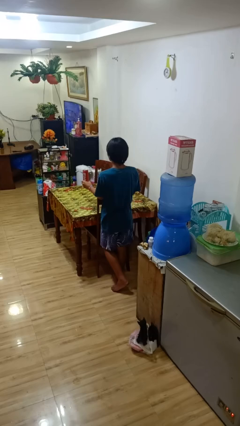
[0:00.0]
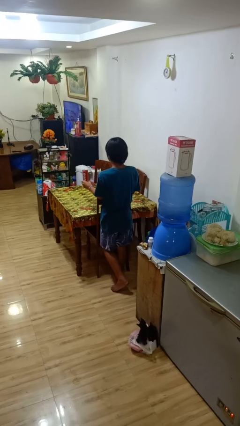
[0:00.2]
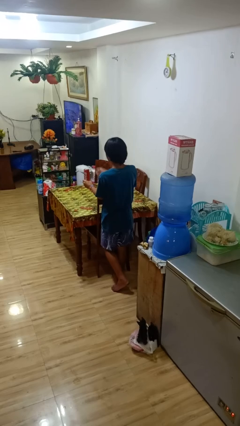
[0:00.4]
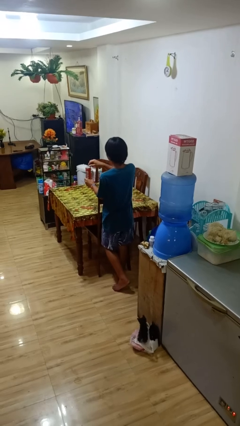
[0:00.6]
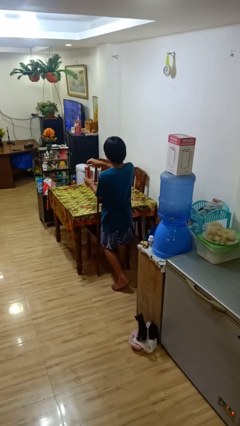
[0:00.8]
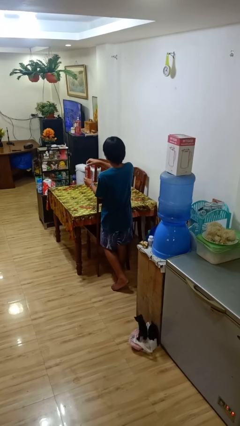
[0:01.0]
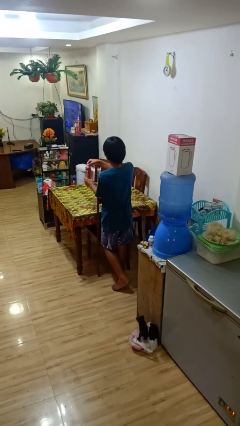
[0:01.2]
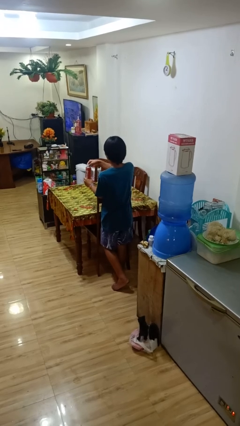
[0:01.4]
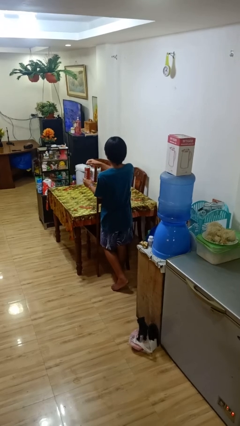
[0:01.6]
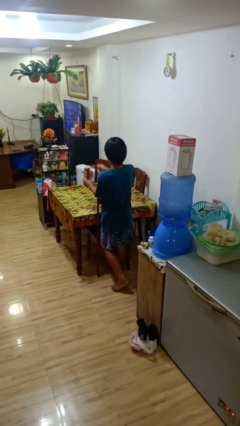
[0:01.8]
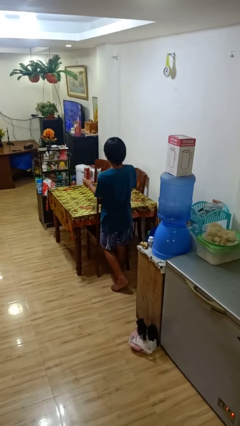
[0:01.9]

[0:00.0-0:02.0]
person opens beverage can

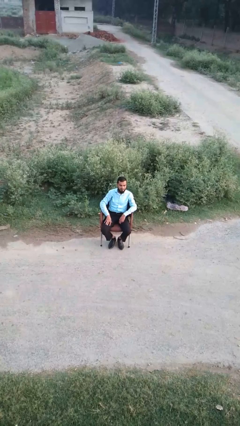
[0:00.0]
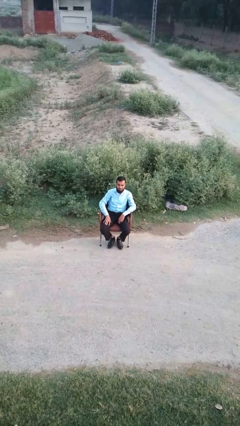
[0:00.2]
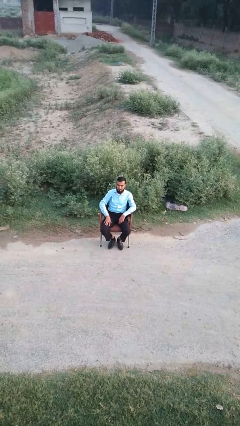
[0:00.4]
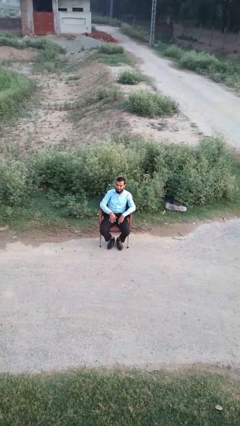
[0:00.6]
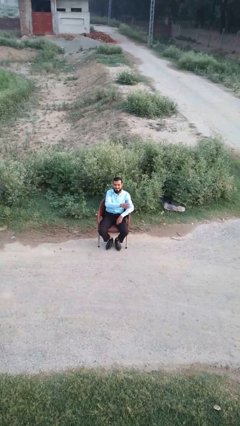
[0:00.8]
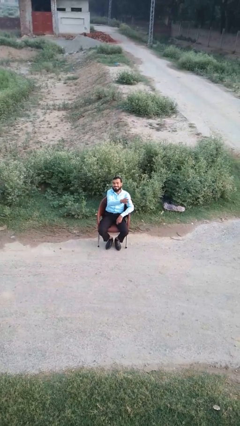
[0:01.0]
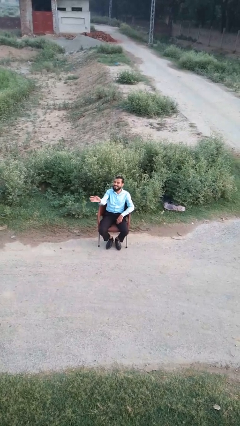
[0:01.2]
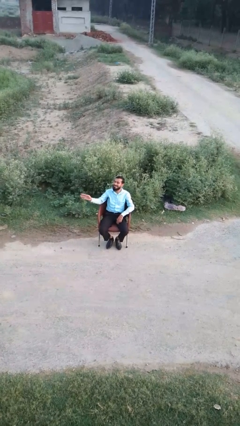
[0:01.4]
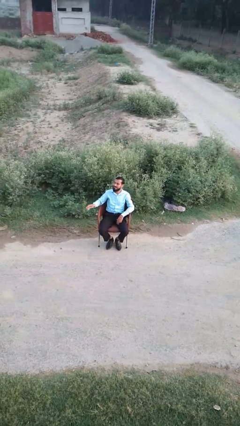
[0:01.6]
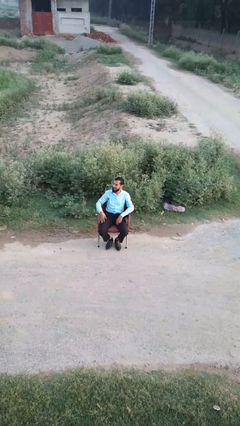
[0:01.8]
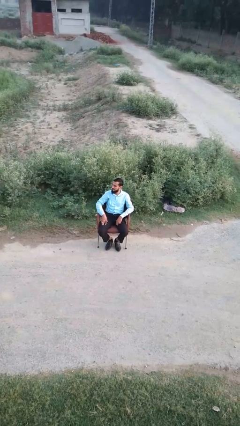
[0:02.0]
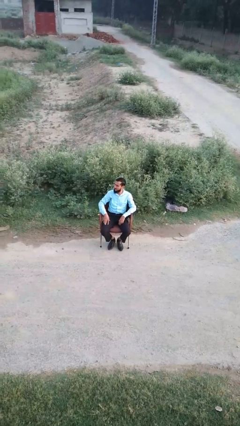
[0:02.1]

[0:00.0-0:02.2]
person gestures swipe right

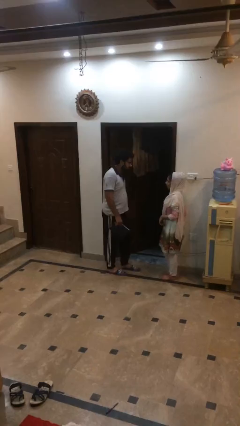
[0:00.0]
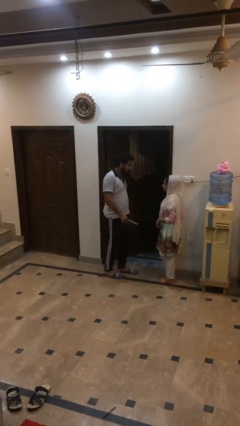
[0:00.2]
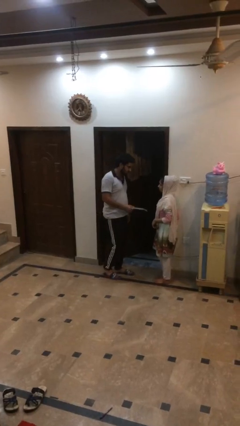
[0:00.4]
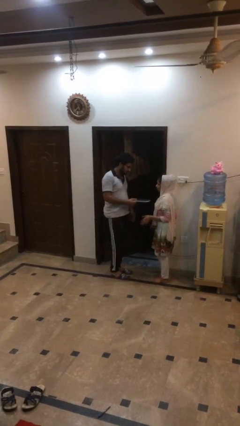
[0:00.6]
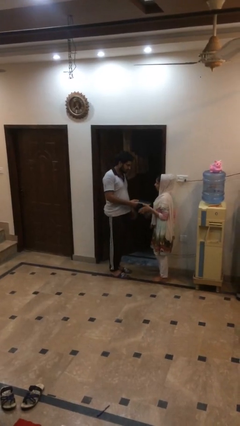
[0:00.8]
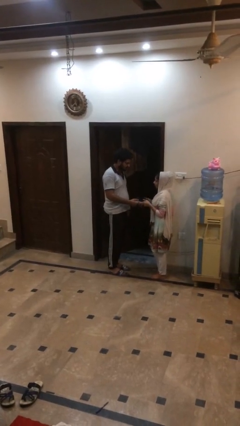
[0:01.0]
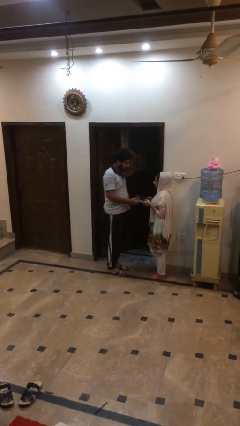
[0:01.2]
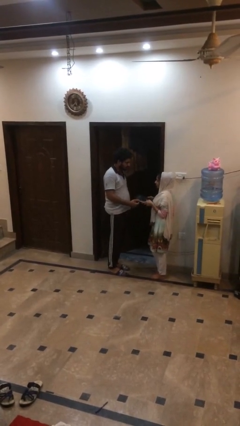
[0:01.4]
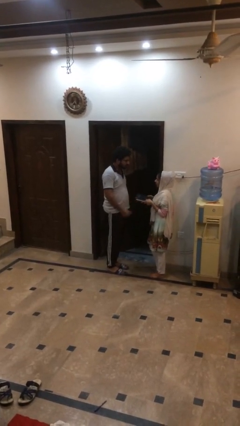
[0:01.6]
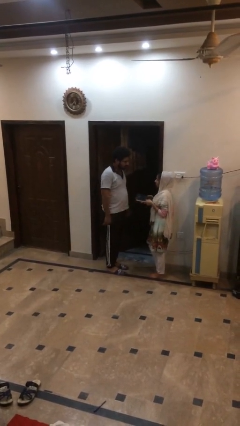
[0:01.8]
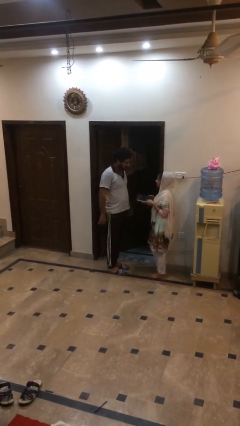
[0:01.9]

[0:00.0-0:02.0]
person transfers object to person

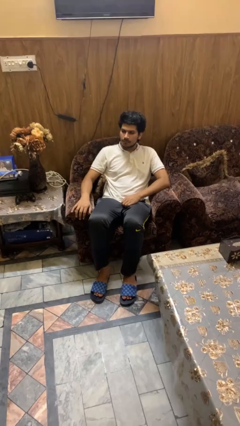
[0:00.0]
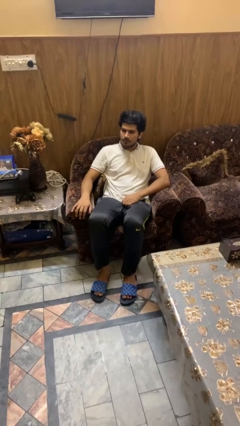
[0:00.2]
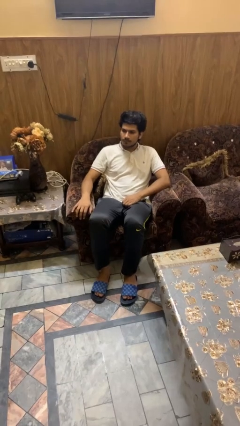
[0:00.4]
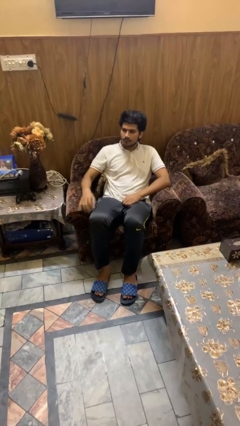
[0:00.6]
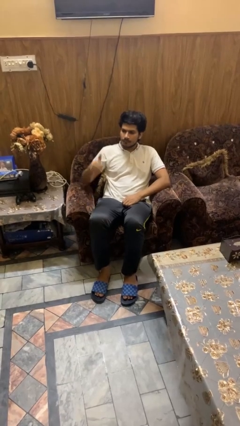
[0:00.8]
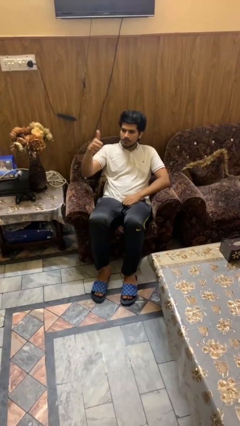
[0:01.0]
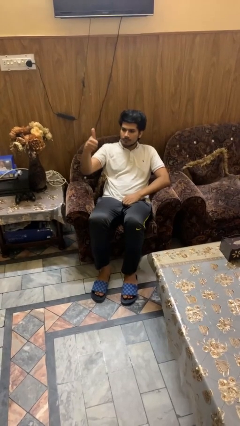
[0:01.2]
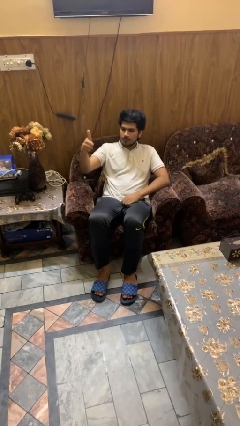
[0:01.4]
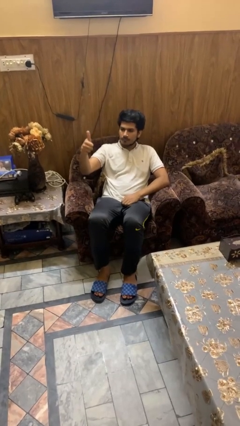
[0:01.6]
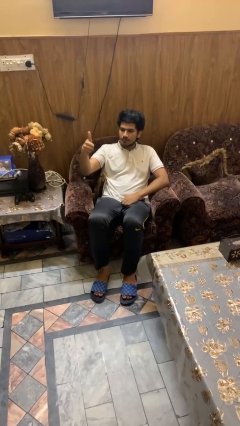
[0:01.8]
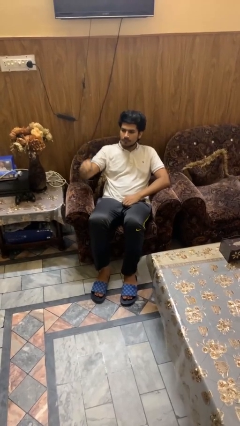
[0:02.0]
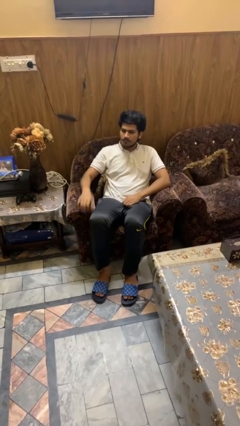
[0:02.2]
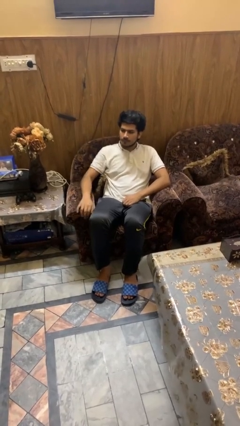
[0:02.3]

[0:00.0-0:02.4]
person gestures thumbs up

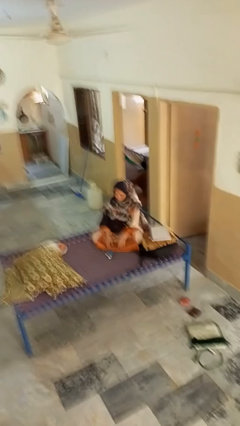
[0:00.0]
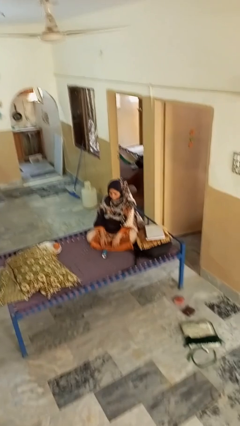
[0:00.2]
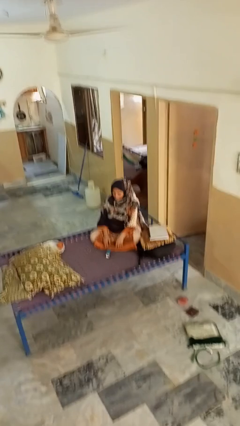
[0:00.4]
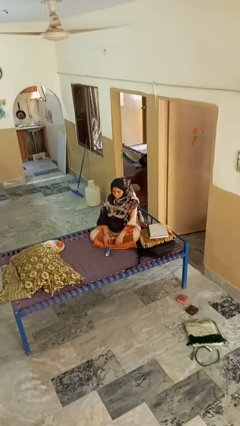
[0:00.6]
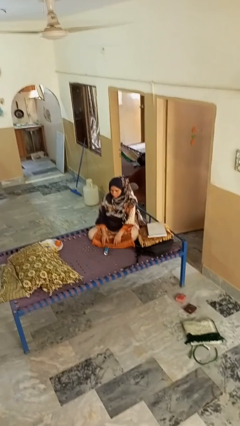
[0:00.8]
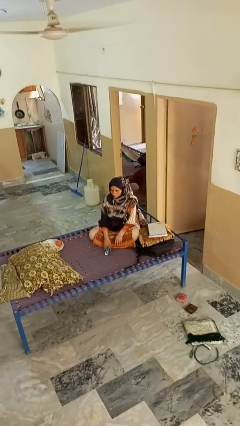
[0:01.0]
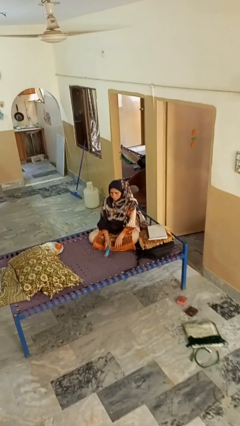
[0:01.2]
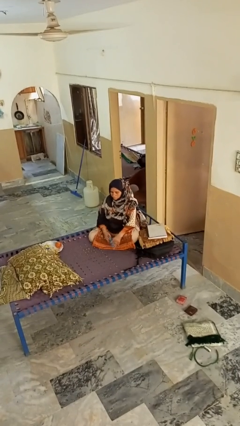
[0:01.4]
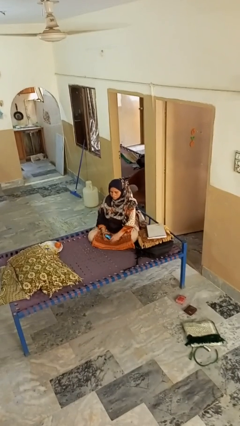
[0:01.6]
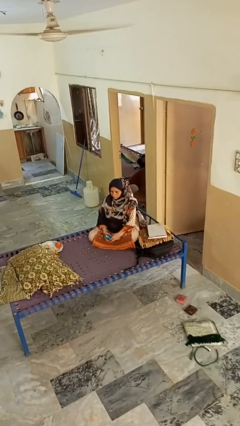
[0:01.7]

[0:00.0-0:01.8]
person picks up object from floor

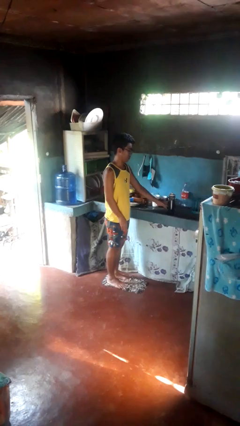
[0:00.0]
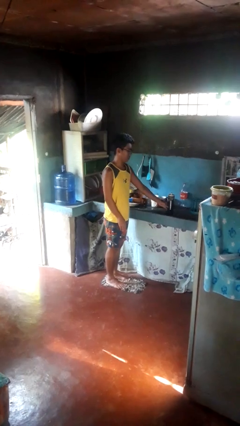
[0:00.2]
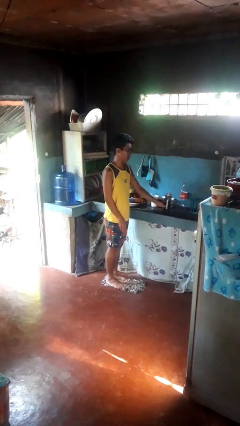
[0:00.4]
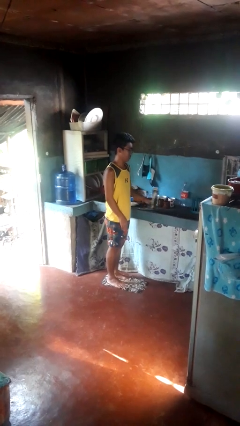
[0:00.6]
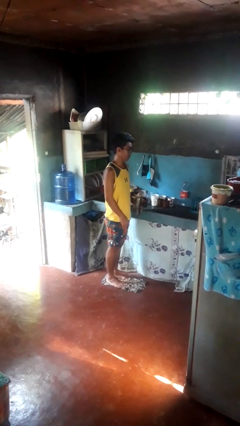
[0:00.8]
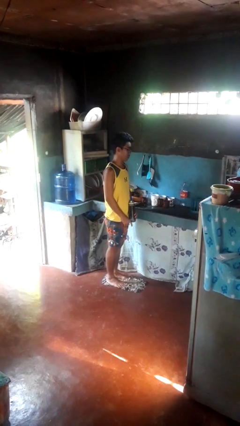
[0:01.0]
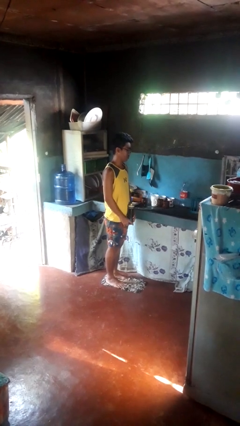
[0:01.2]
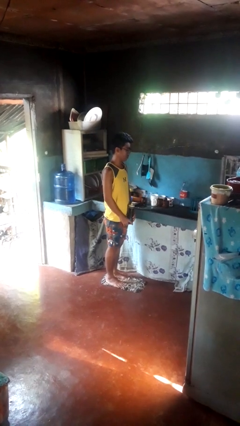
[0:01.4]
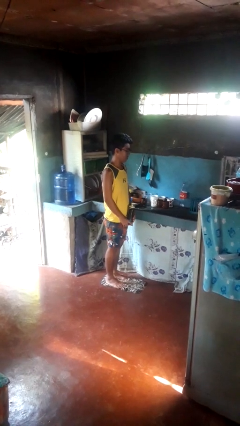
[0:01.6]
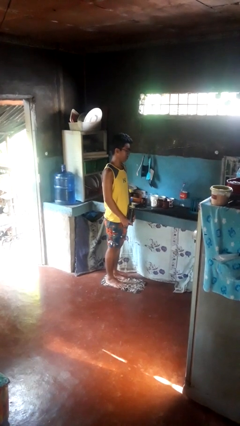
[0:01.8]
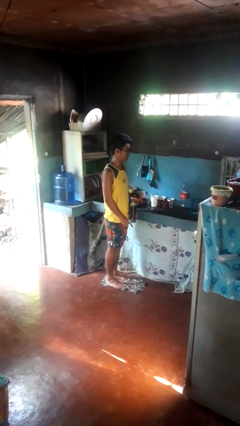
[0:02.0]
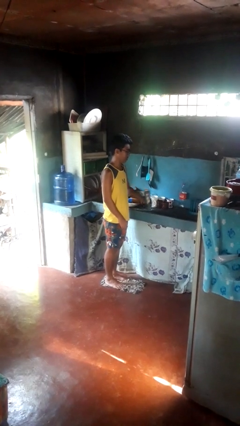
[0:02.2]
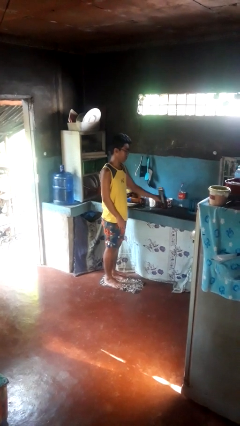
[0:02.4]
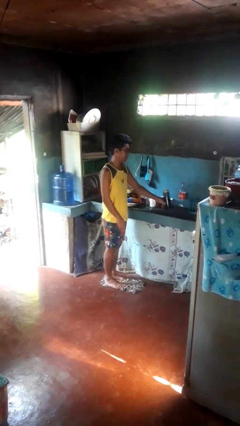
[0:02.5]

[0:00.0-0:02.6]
person picks up object from countertop

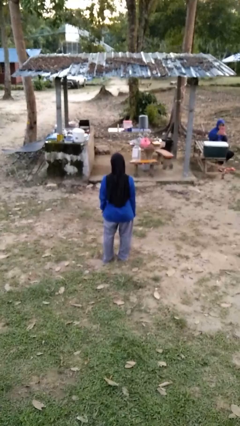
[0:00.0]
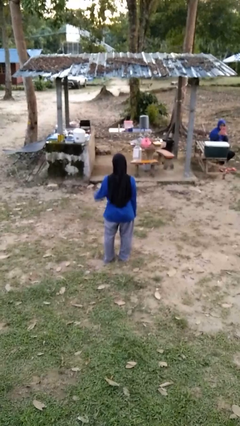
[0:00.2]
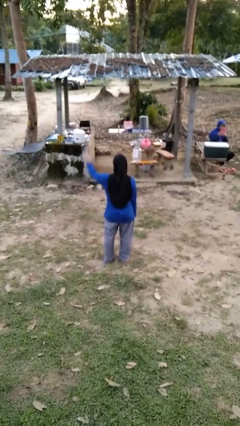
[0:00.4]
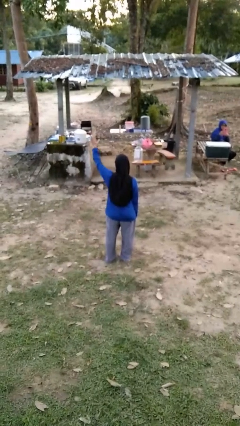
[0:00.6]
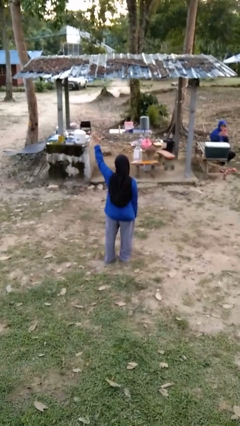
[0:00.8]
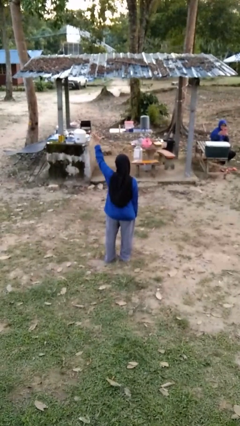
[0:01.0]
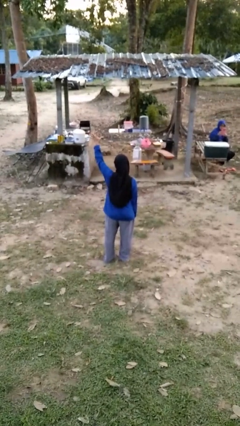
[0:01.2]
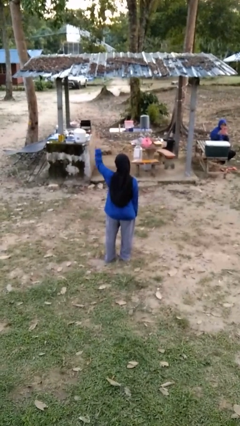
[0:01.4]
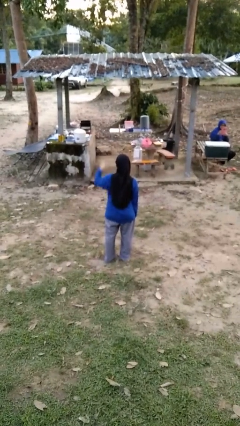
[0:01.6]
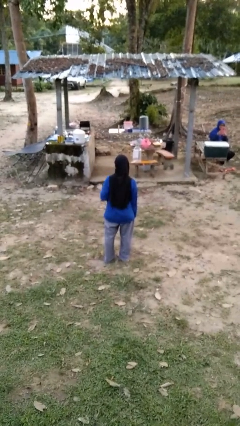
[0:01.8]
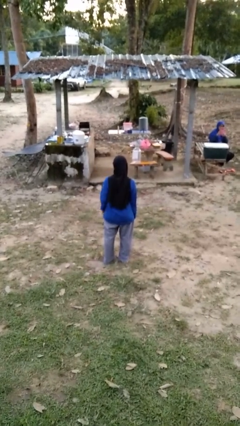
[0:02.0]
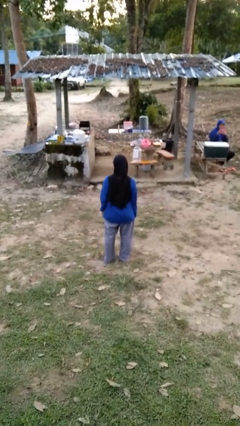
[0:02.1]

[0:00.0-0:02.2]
person gestures number five

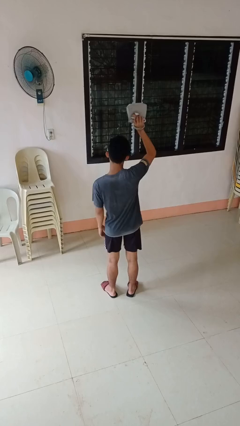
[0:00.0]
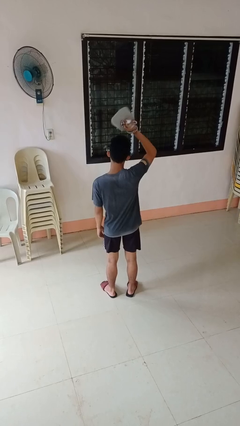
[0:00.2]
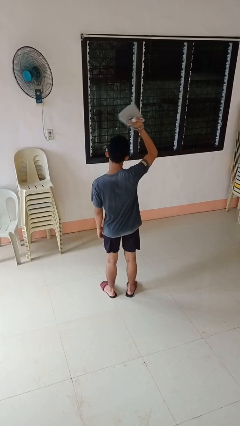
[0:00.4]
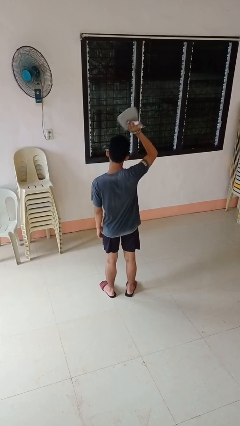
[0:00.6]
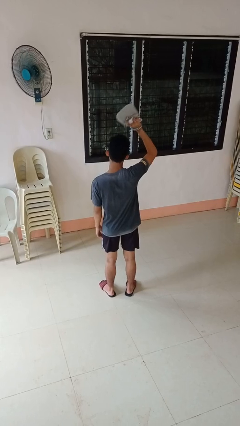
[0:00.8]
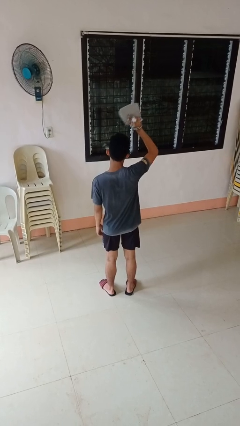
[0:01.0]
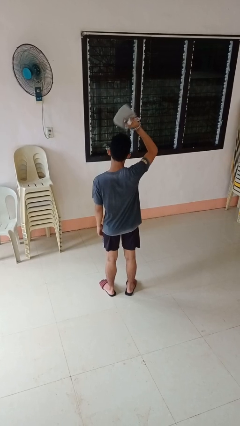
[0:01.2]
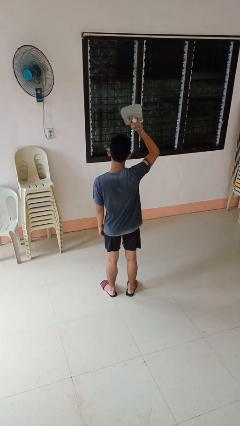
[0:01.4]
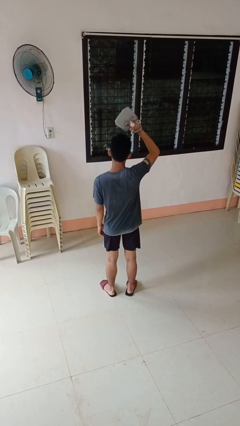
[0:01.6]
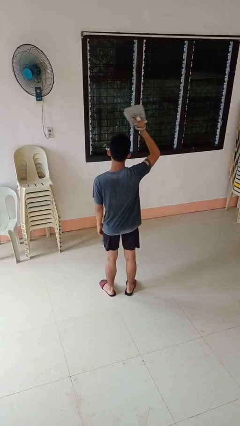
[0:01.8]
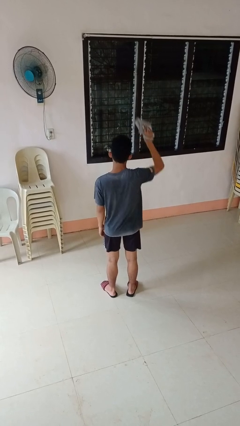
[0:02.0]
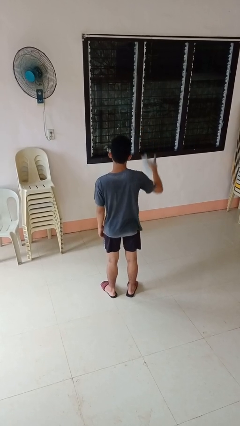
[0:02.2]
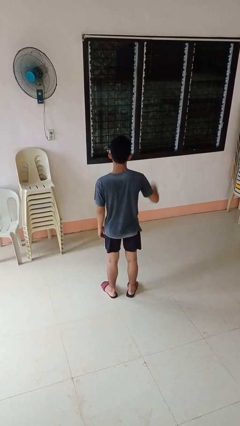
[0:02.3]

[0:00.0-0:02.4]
person holds object above head
